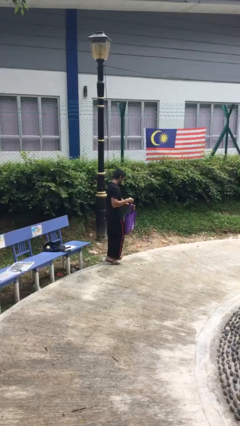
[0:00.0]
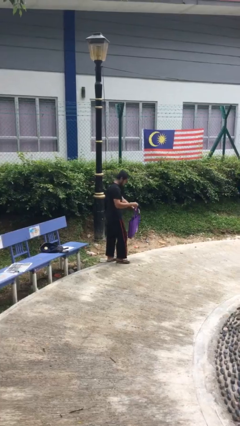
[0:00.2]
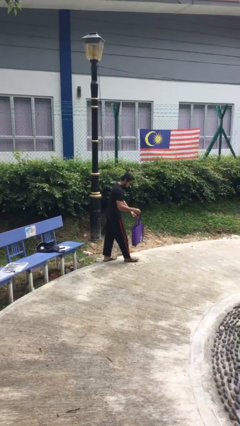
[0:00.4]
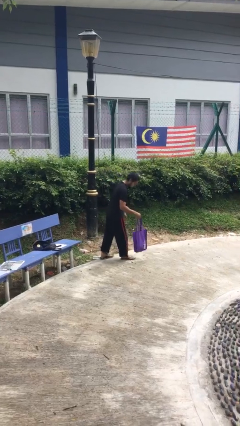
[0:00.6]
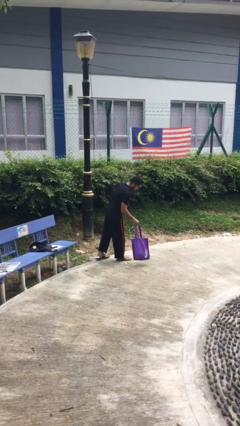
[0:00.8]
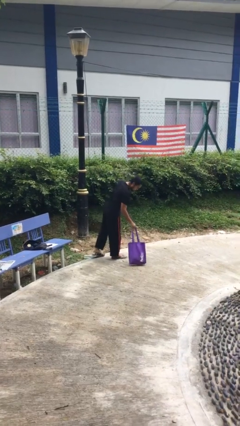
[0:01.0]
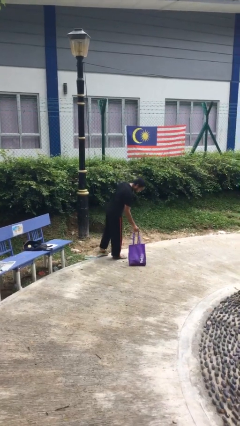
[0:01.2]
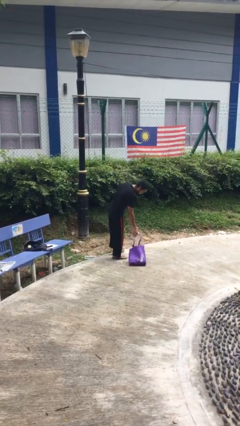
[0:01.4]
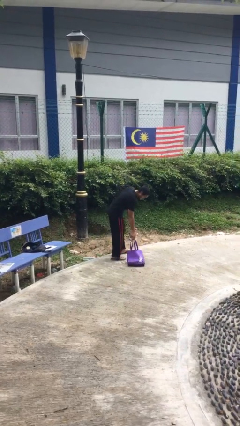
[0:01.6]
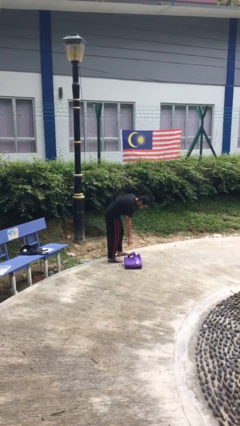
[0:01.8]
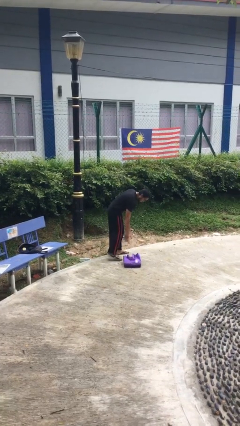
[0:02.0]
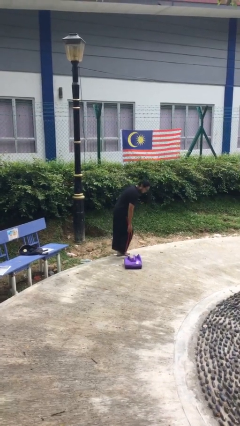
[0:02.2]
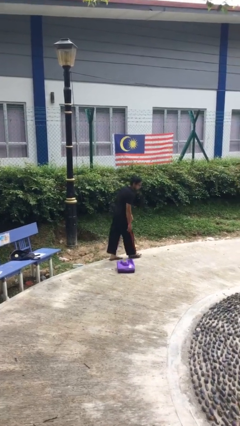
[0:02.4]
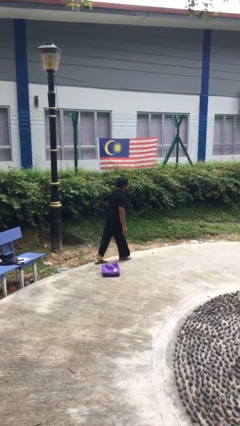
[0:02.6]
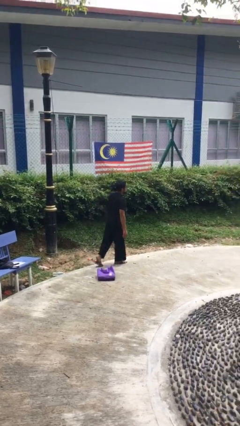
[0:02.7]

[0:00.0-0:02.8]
person puts down object on floor

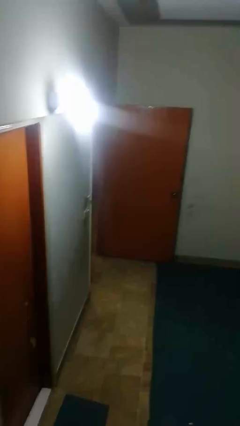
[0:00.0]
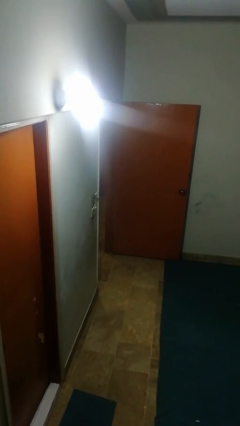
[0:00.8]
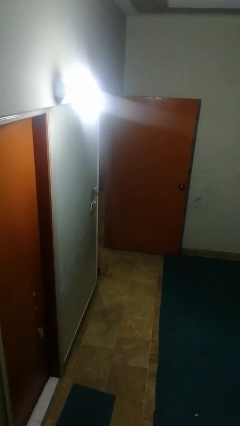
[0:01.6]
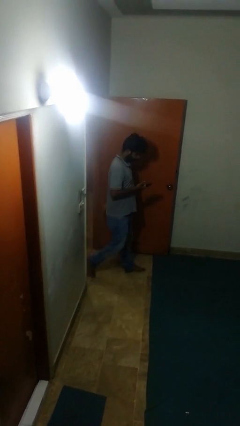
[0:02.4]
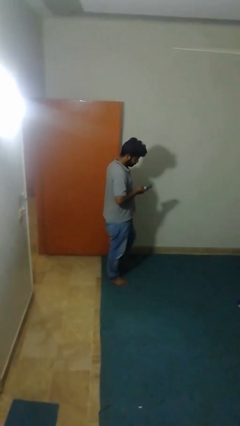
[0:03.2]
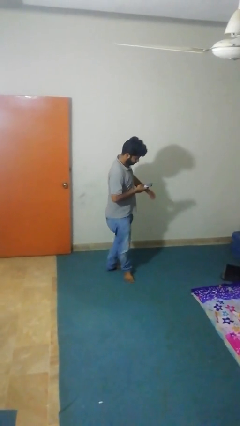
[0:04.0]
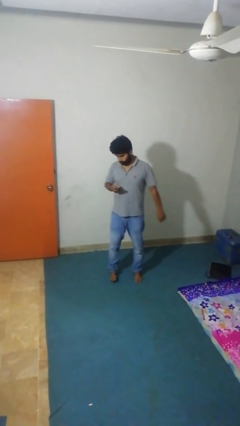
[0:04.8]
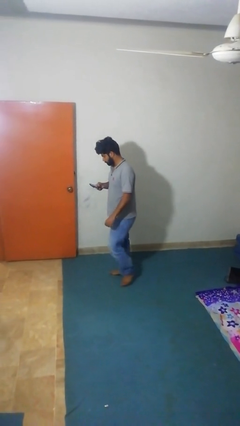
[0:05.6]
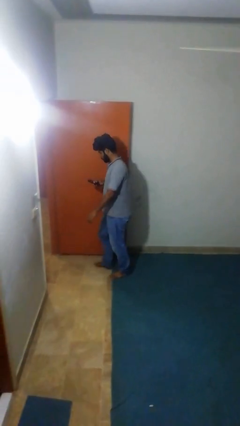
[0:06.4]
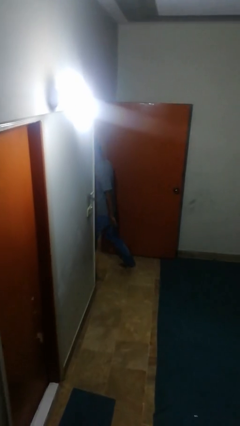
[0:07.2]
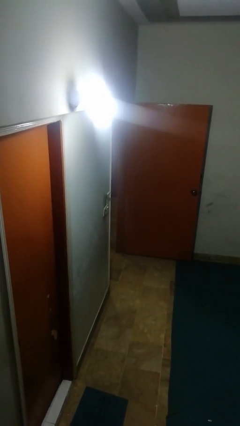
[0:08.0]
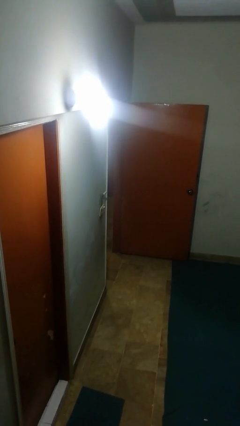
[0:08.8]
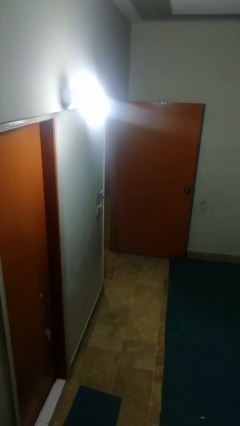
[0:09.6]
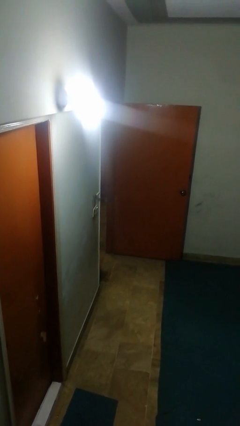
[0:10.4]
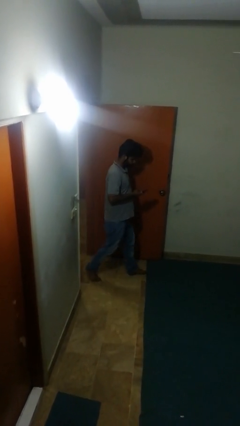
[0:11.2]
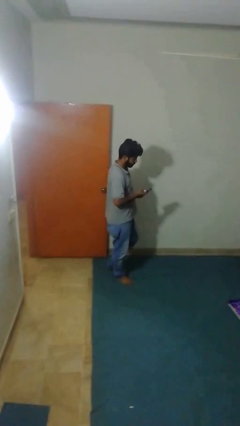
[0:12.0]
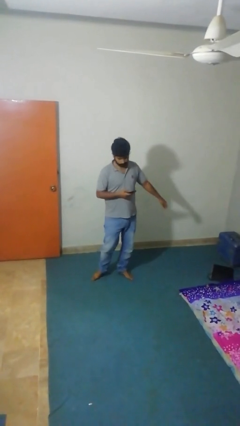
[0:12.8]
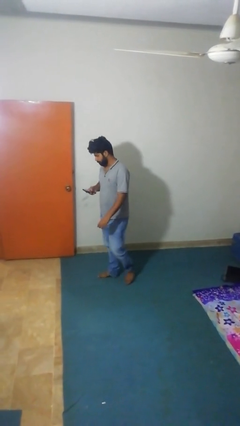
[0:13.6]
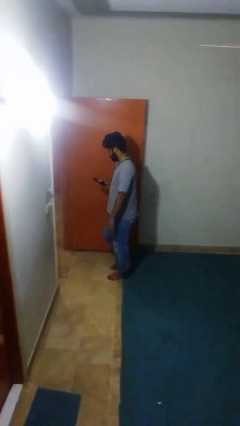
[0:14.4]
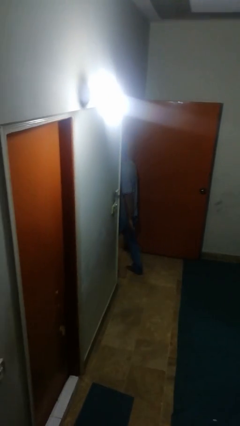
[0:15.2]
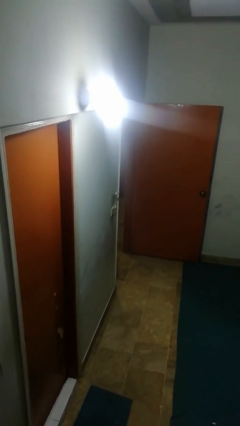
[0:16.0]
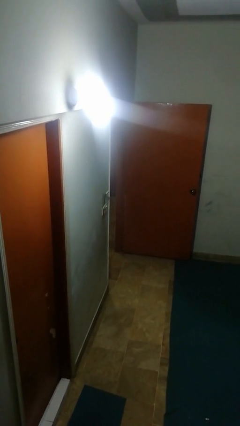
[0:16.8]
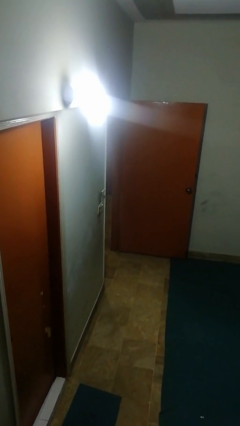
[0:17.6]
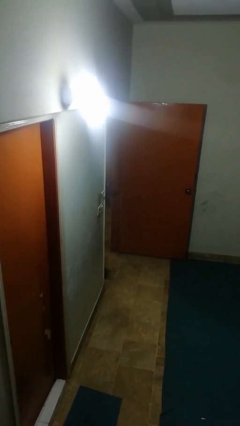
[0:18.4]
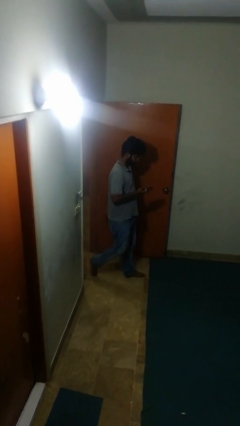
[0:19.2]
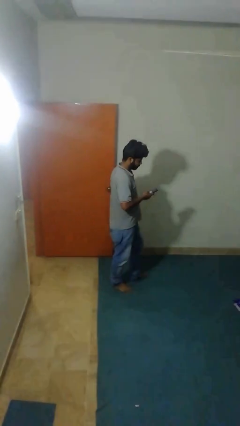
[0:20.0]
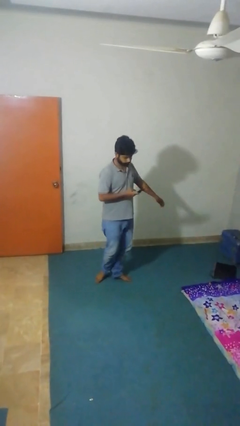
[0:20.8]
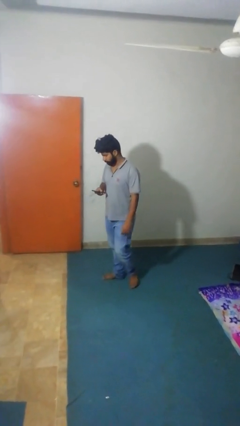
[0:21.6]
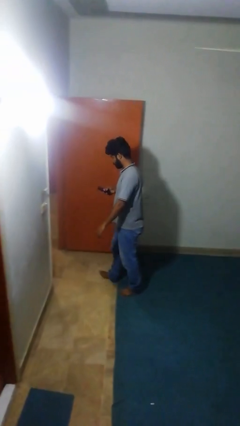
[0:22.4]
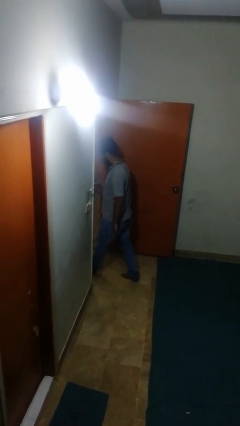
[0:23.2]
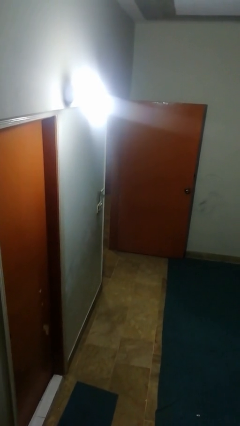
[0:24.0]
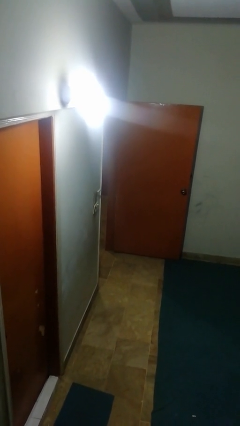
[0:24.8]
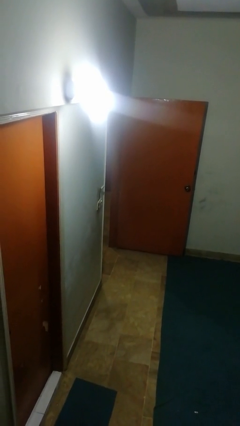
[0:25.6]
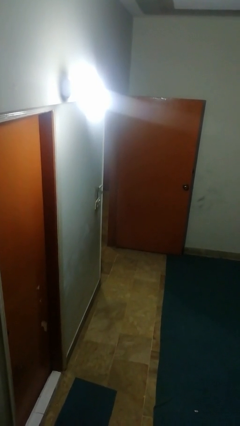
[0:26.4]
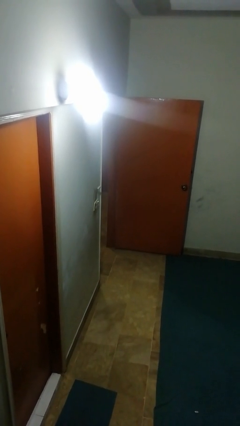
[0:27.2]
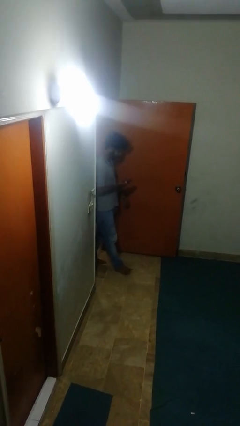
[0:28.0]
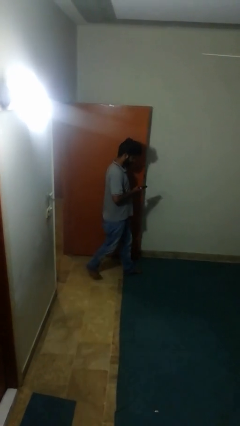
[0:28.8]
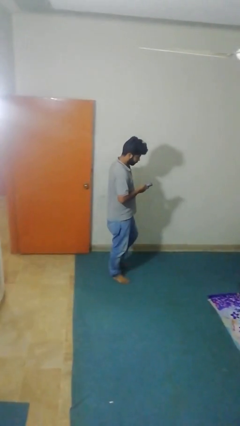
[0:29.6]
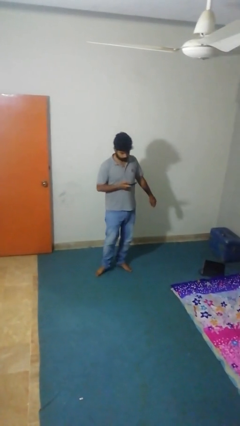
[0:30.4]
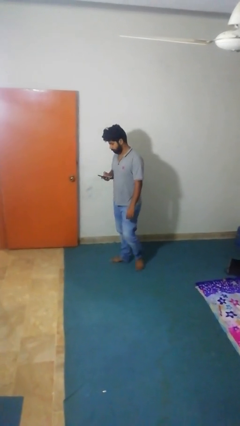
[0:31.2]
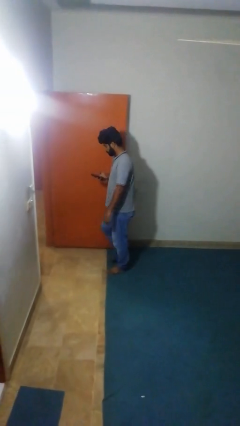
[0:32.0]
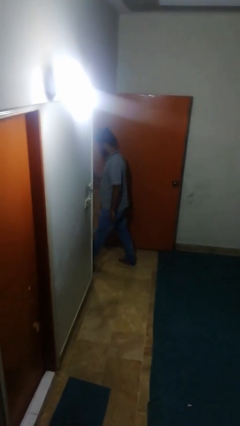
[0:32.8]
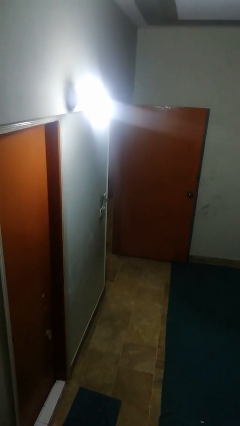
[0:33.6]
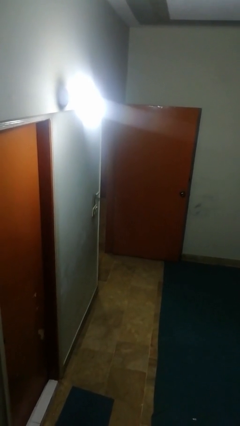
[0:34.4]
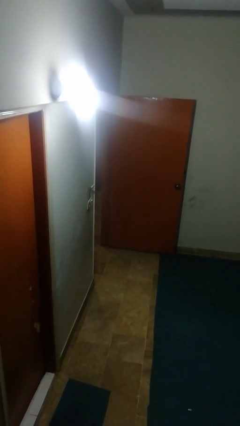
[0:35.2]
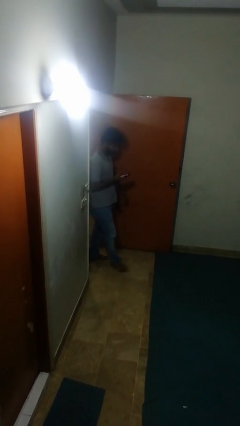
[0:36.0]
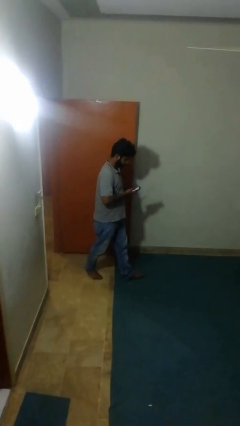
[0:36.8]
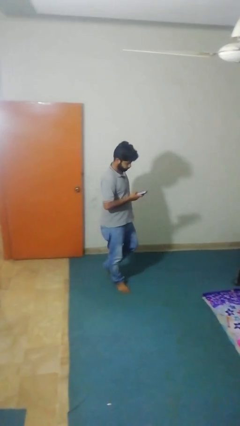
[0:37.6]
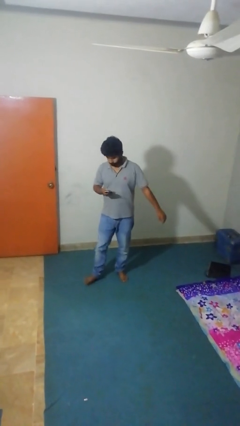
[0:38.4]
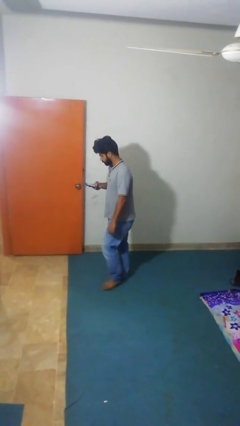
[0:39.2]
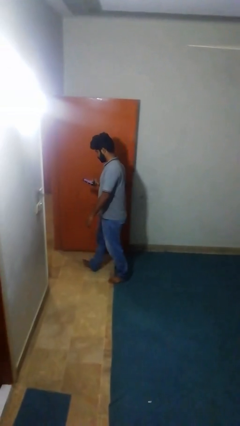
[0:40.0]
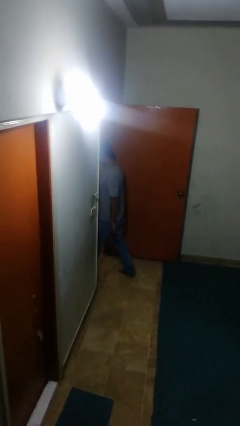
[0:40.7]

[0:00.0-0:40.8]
person texts on phone

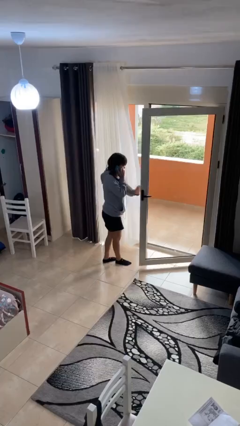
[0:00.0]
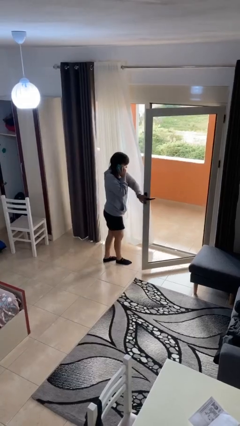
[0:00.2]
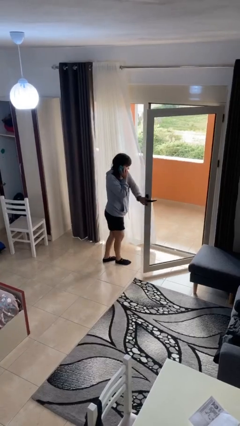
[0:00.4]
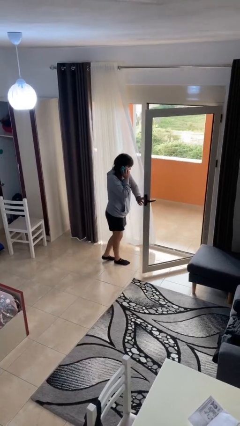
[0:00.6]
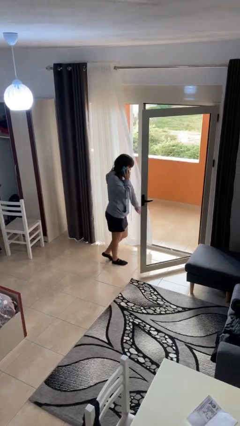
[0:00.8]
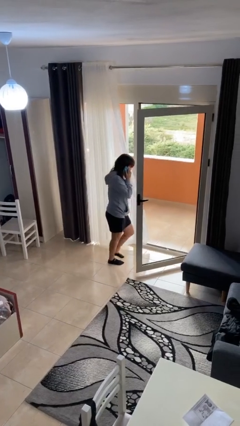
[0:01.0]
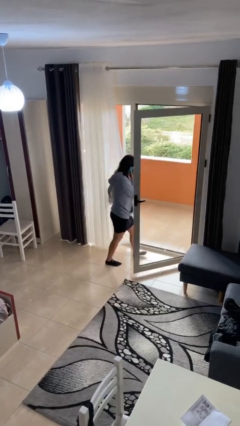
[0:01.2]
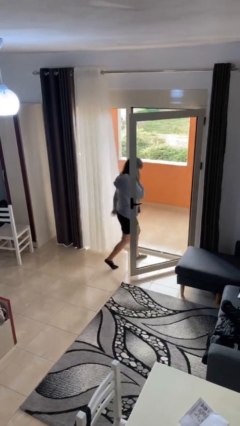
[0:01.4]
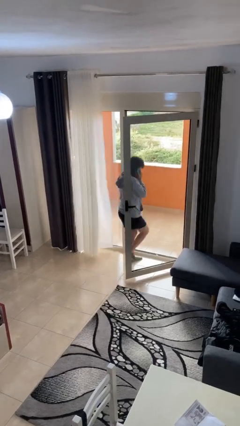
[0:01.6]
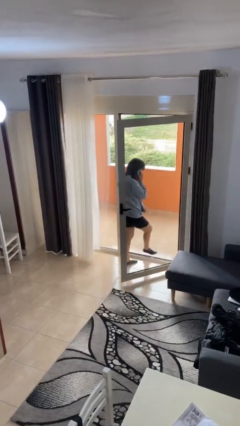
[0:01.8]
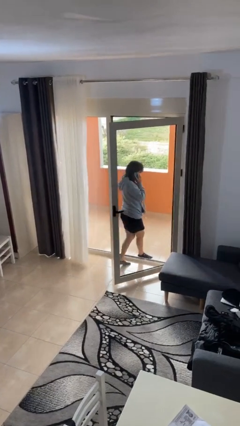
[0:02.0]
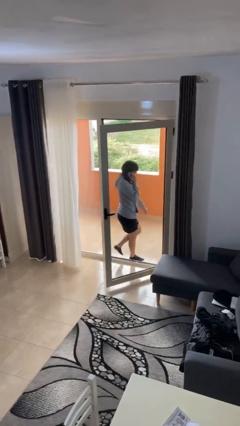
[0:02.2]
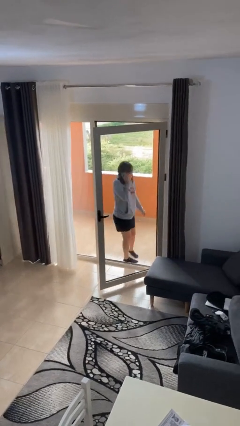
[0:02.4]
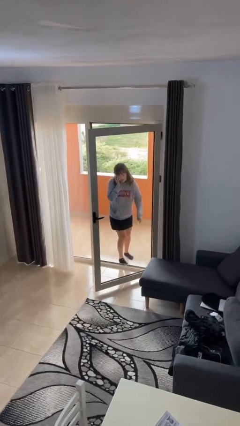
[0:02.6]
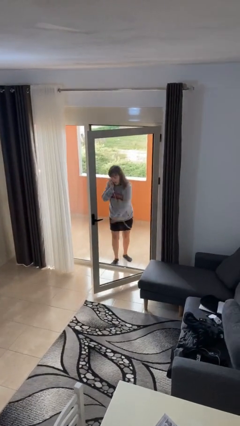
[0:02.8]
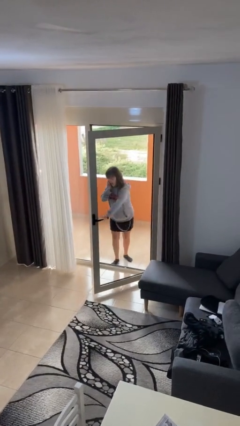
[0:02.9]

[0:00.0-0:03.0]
person exits scene through structure

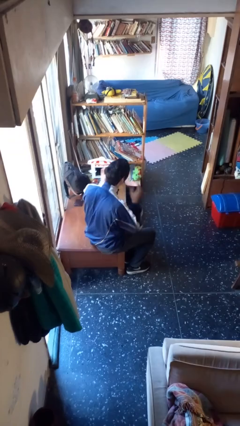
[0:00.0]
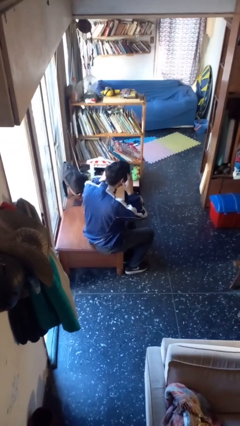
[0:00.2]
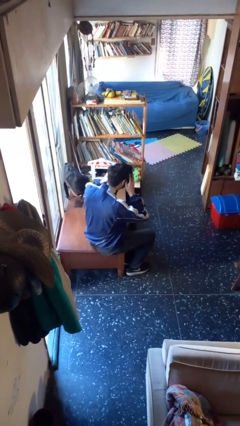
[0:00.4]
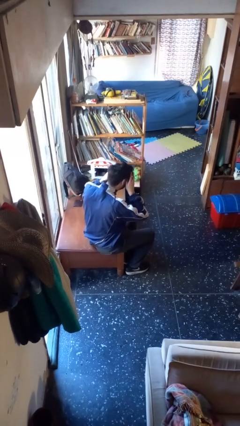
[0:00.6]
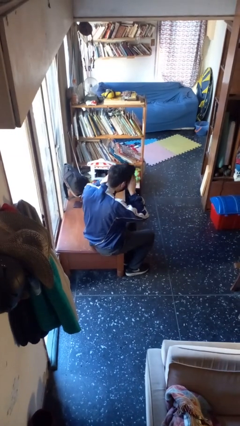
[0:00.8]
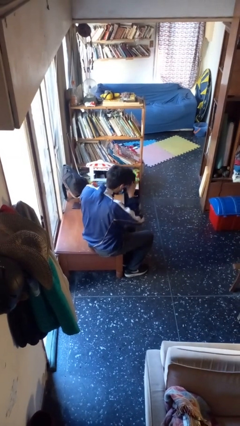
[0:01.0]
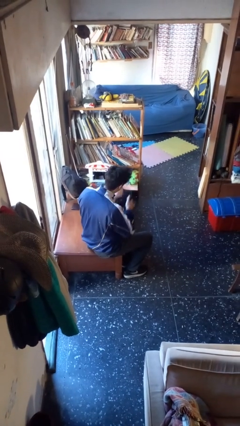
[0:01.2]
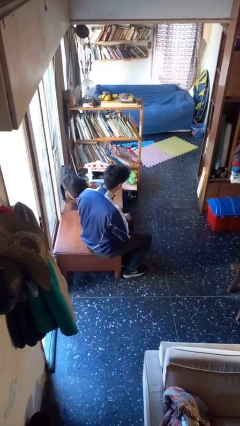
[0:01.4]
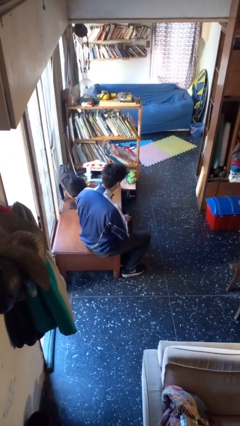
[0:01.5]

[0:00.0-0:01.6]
person takes off facemask
